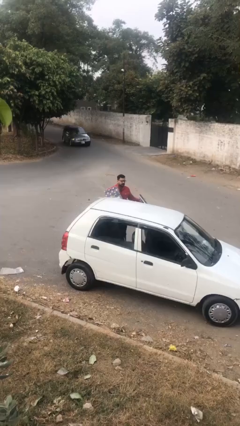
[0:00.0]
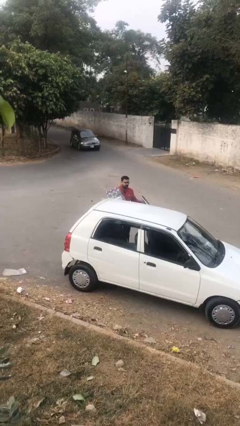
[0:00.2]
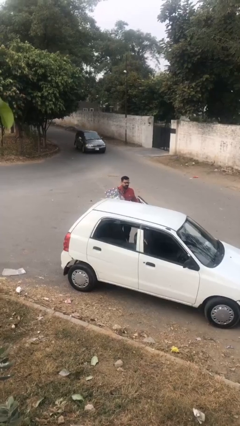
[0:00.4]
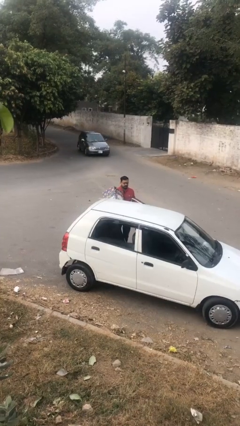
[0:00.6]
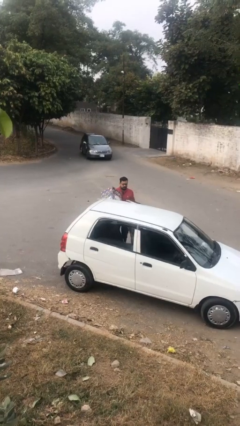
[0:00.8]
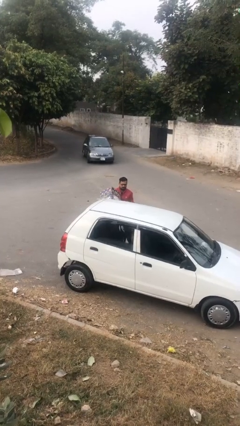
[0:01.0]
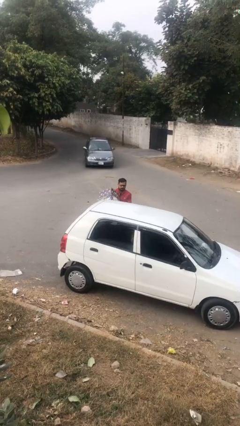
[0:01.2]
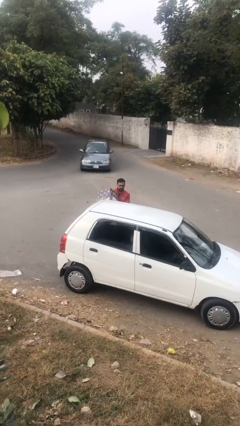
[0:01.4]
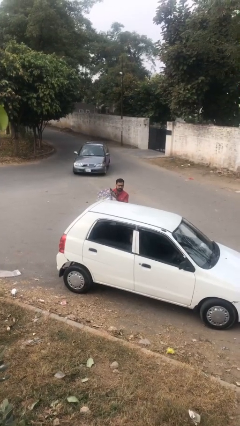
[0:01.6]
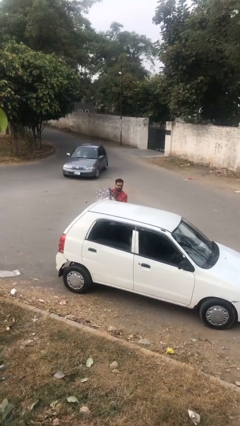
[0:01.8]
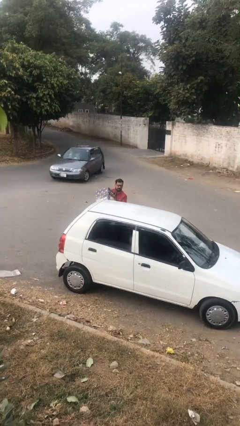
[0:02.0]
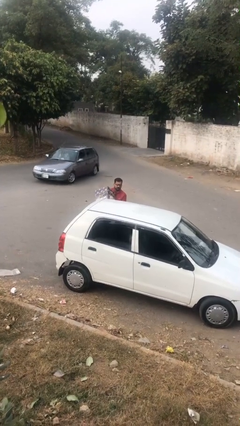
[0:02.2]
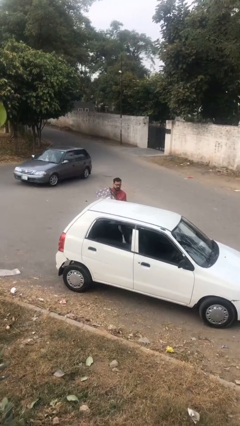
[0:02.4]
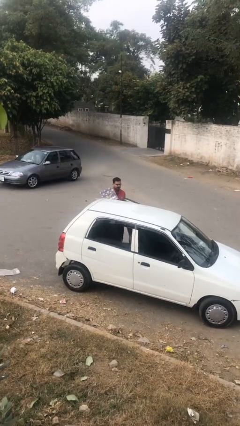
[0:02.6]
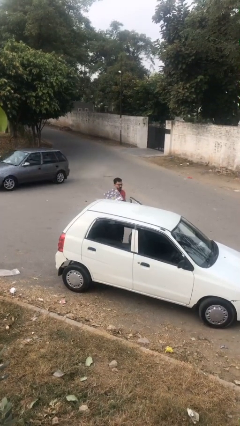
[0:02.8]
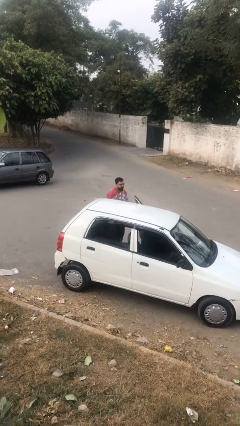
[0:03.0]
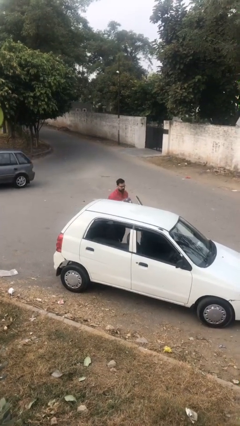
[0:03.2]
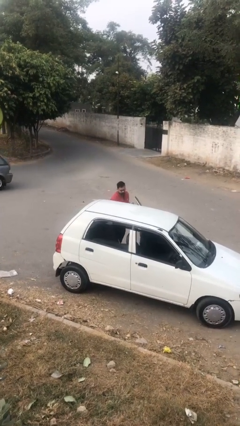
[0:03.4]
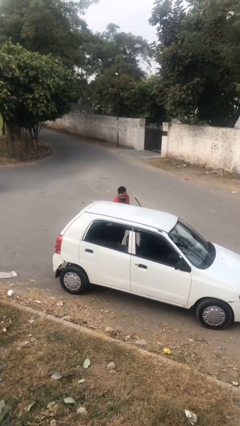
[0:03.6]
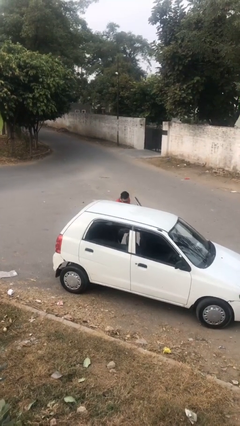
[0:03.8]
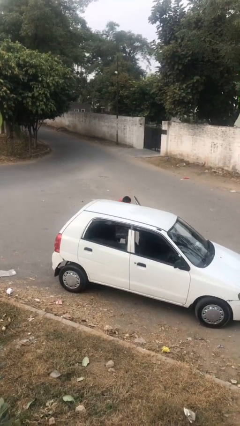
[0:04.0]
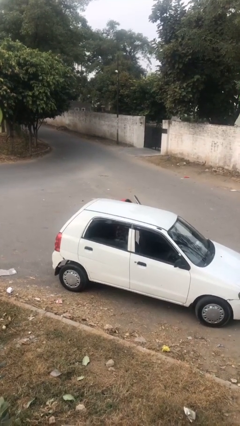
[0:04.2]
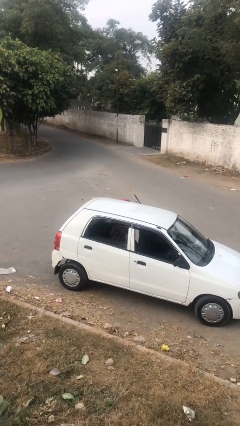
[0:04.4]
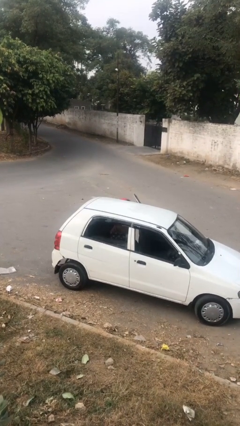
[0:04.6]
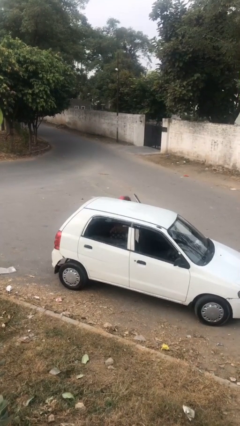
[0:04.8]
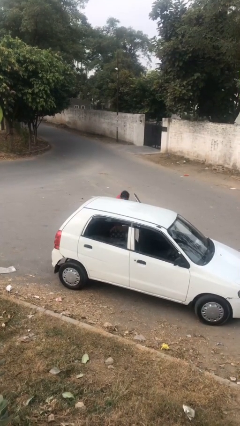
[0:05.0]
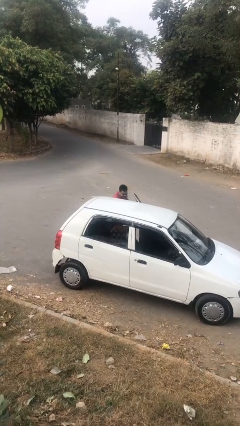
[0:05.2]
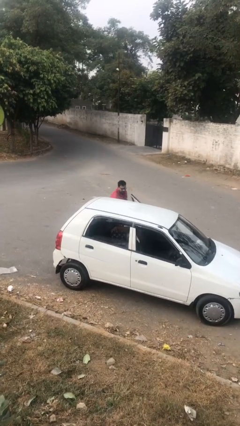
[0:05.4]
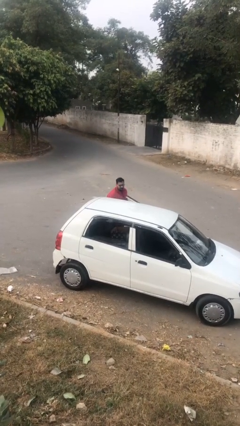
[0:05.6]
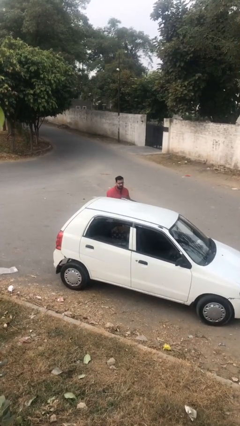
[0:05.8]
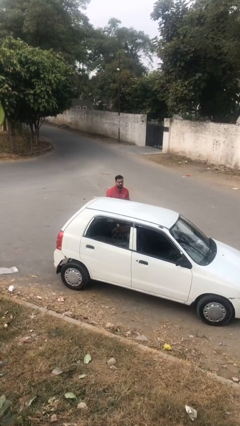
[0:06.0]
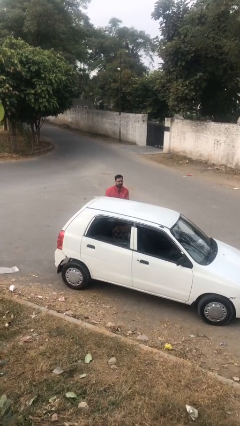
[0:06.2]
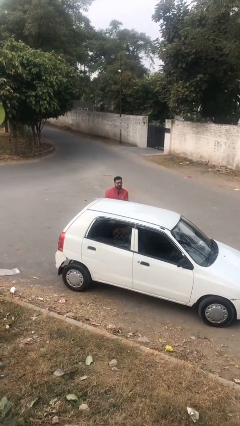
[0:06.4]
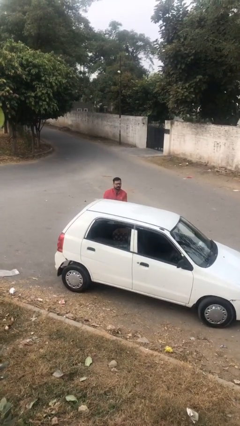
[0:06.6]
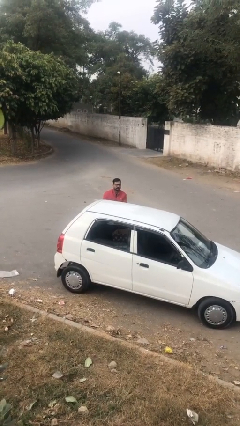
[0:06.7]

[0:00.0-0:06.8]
person loads car

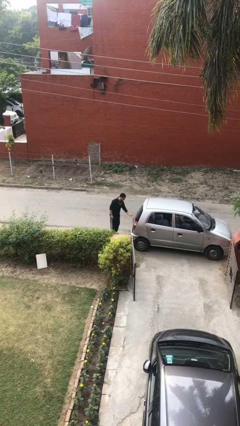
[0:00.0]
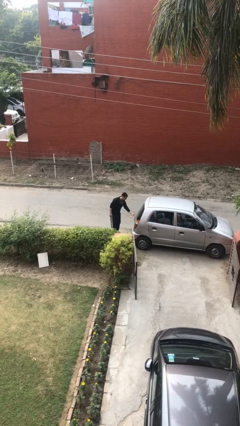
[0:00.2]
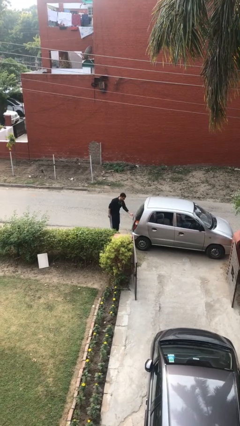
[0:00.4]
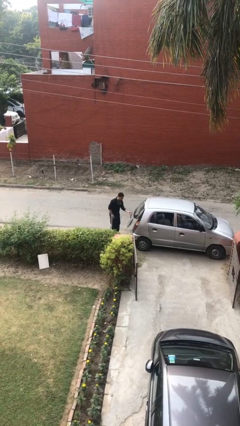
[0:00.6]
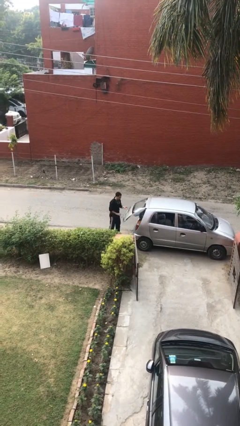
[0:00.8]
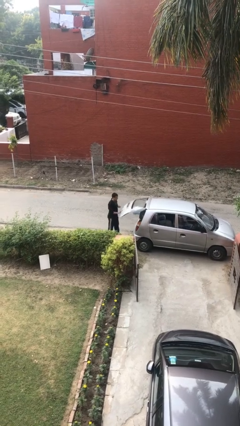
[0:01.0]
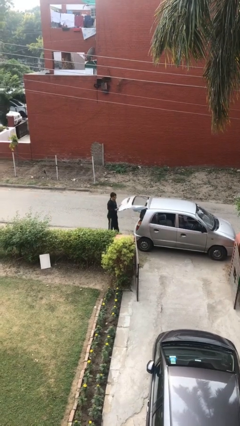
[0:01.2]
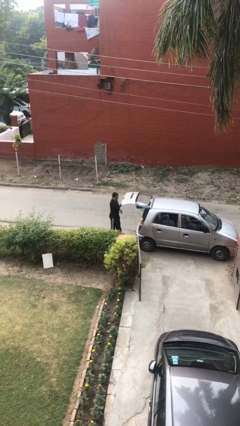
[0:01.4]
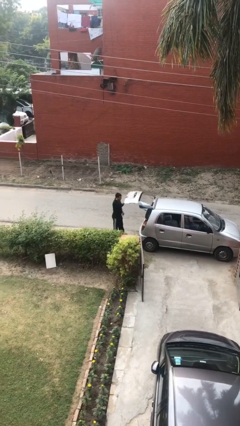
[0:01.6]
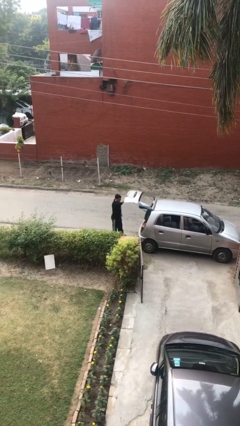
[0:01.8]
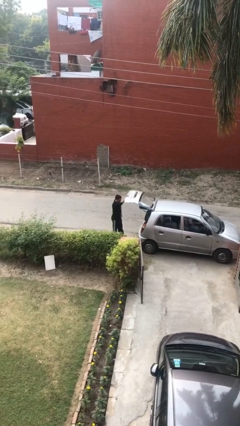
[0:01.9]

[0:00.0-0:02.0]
person opens car trunk

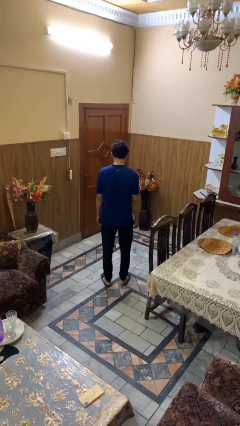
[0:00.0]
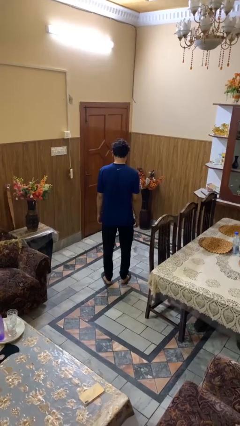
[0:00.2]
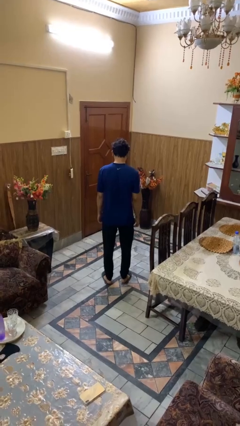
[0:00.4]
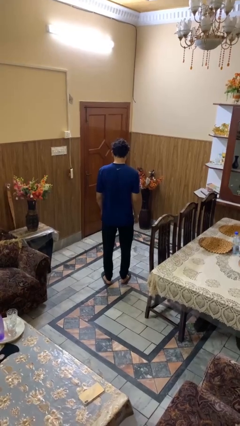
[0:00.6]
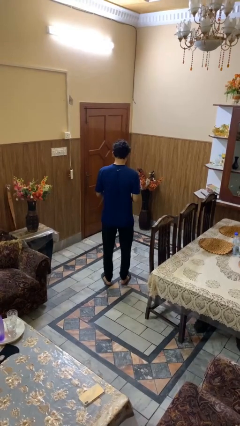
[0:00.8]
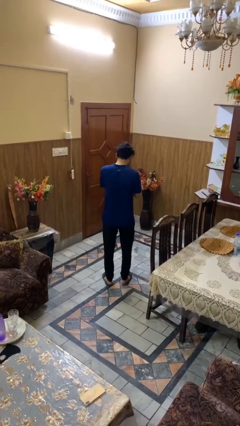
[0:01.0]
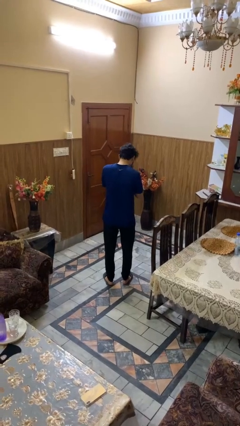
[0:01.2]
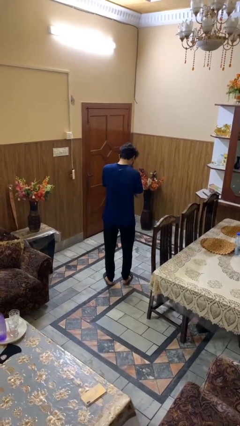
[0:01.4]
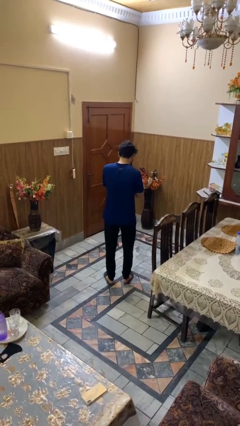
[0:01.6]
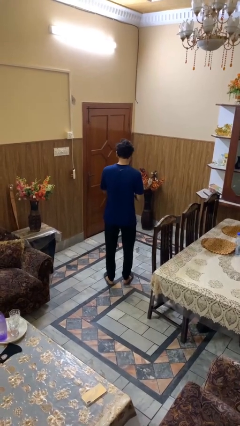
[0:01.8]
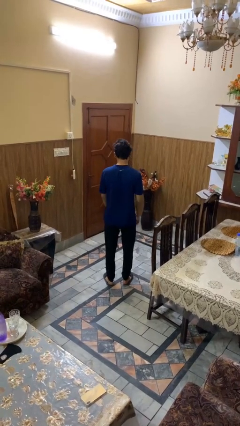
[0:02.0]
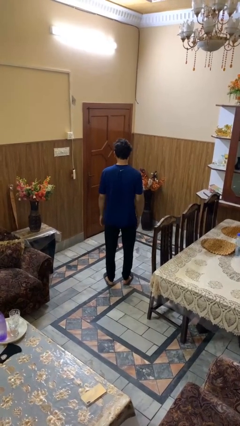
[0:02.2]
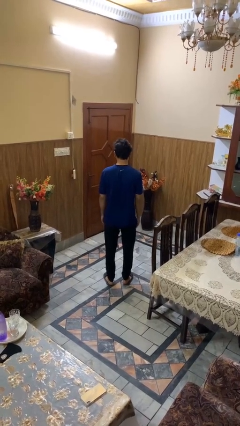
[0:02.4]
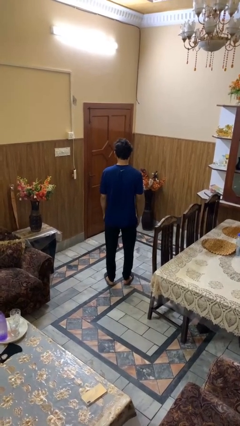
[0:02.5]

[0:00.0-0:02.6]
person sneezes into hand

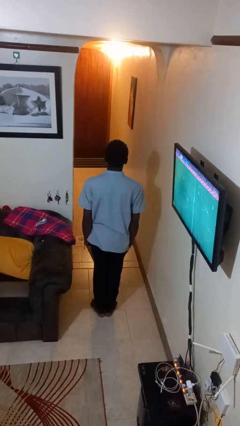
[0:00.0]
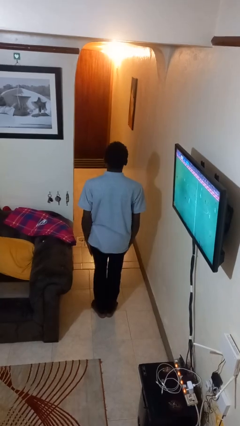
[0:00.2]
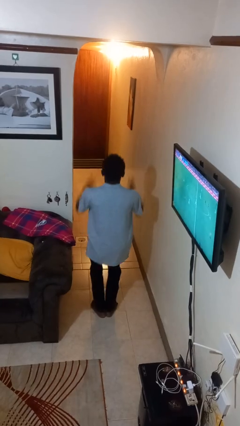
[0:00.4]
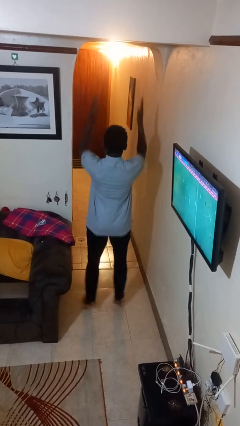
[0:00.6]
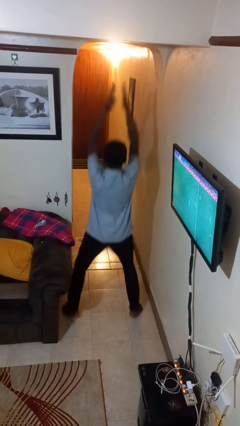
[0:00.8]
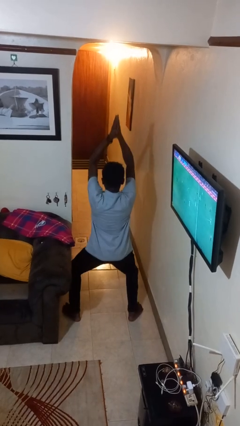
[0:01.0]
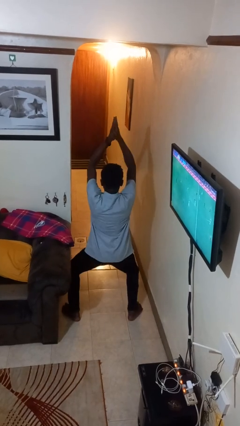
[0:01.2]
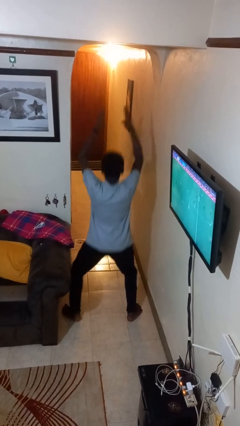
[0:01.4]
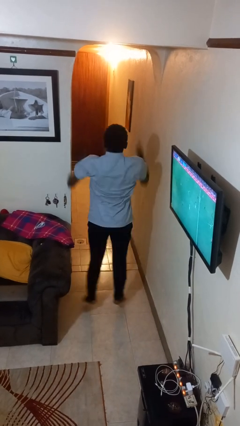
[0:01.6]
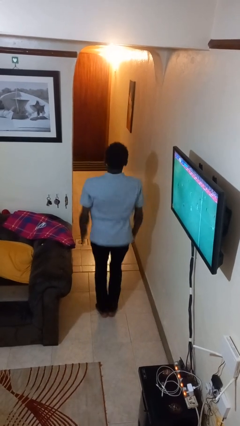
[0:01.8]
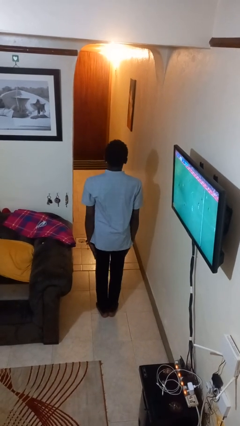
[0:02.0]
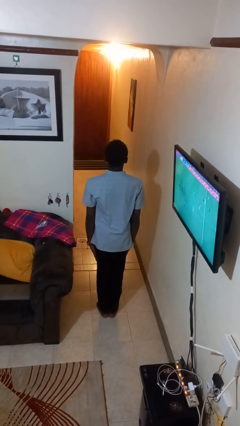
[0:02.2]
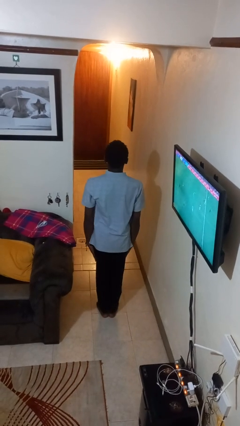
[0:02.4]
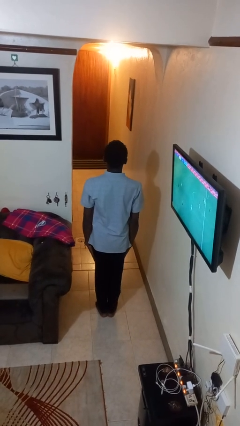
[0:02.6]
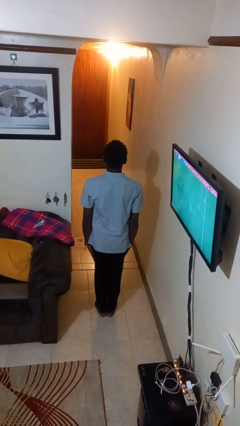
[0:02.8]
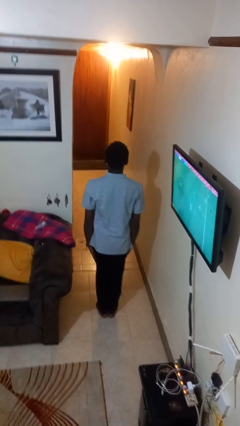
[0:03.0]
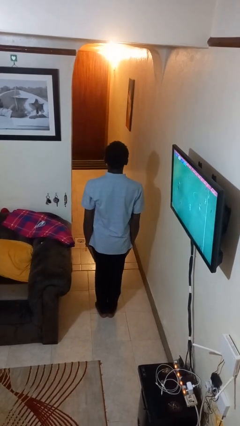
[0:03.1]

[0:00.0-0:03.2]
person exercises with jumping jacks

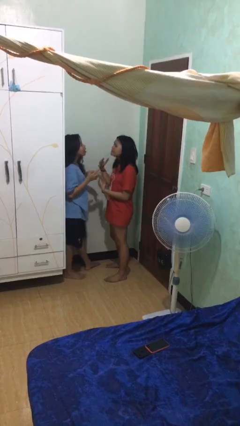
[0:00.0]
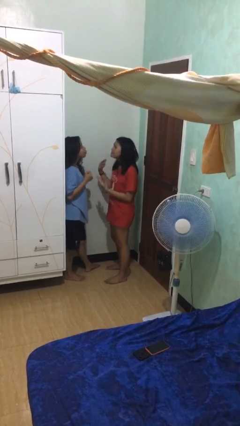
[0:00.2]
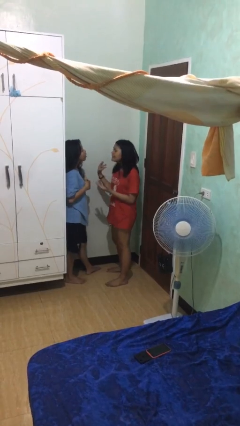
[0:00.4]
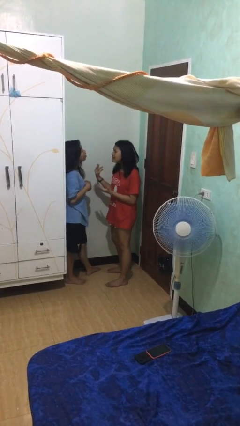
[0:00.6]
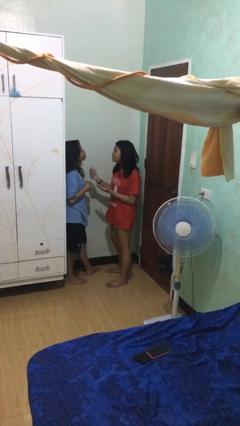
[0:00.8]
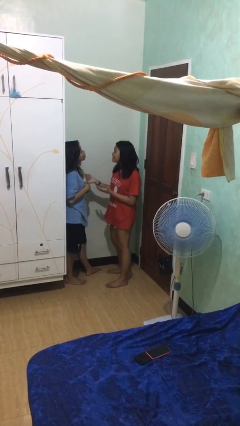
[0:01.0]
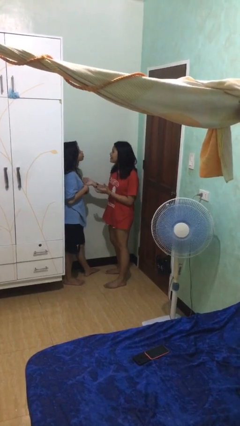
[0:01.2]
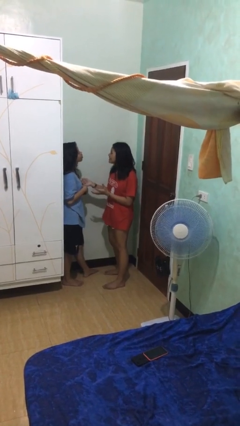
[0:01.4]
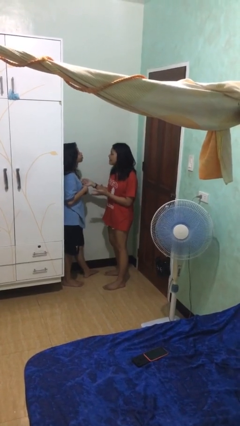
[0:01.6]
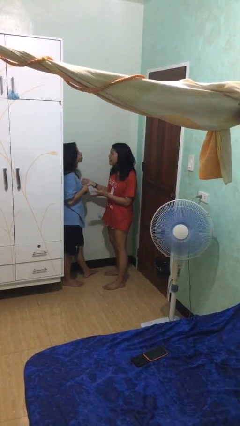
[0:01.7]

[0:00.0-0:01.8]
person talks to person

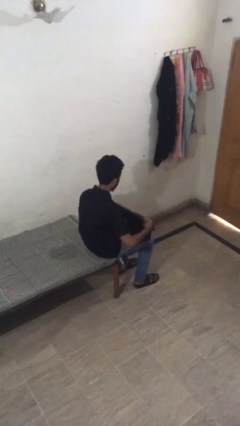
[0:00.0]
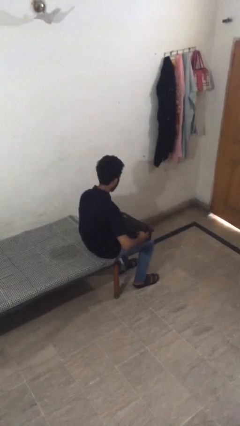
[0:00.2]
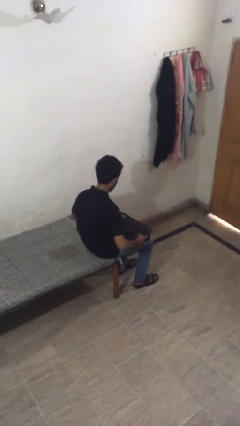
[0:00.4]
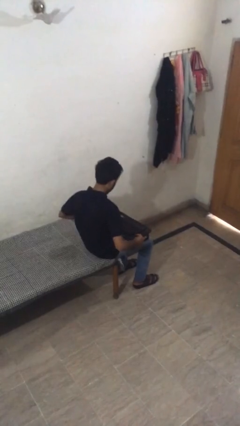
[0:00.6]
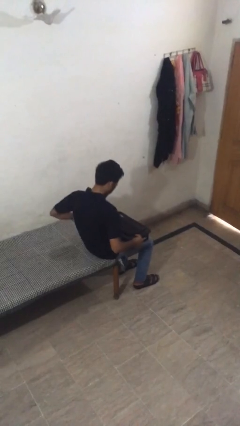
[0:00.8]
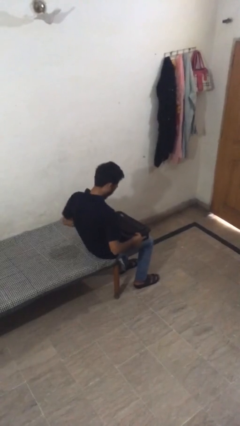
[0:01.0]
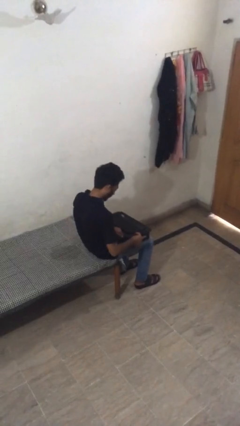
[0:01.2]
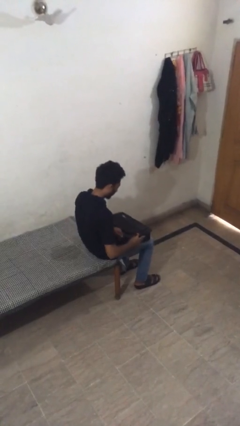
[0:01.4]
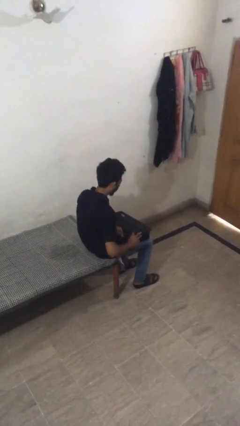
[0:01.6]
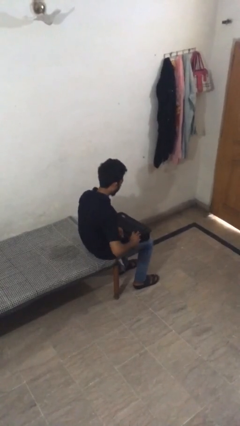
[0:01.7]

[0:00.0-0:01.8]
person closes suitcase
